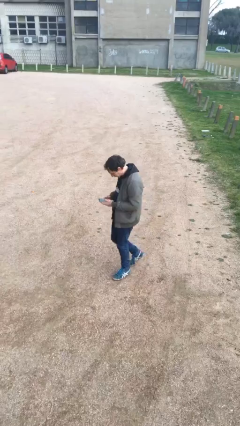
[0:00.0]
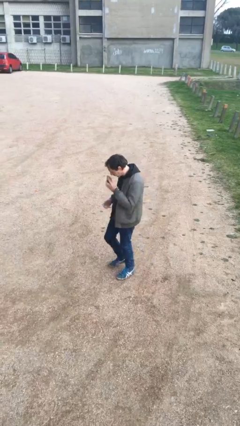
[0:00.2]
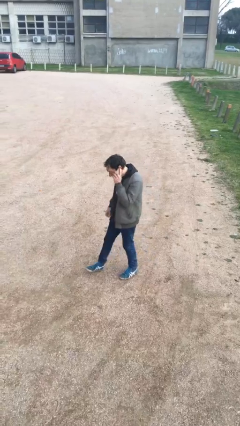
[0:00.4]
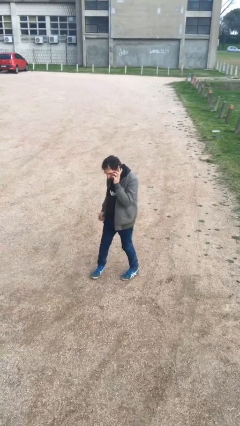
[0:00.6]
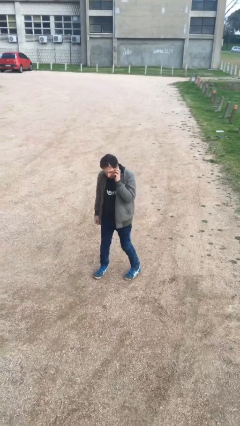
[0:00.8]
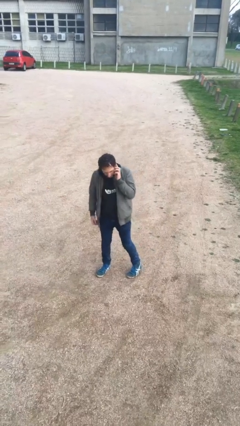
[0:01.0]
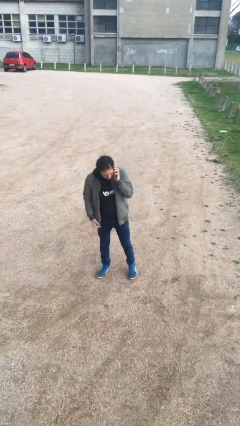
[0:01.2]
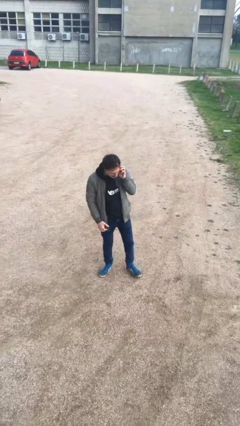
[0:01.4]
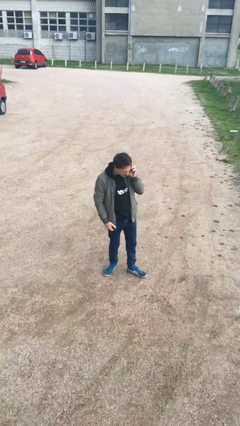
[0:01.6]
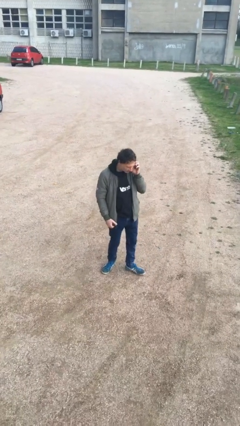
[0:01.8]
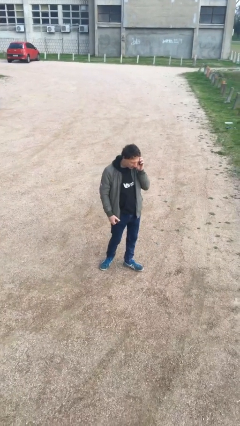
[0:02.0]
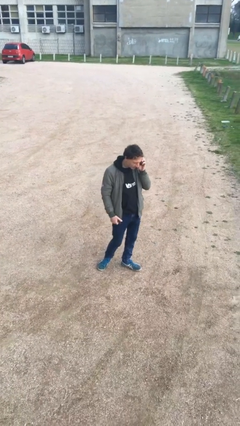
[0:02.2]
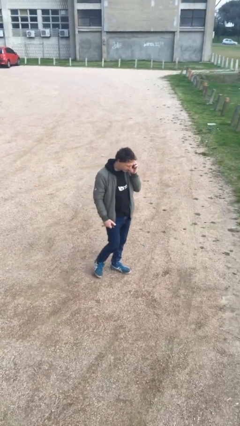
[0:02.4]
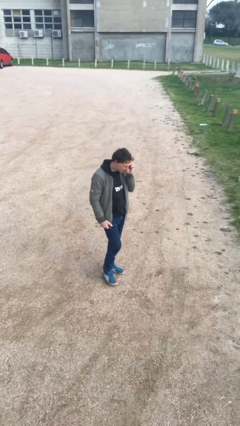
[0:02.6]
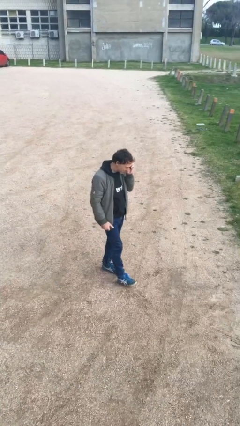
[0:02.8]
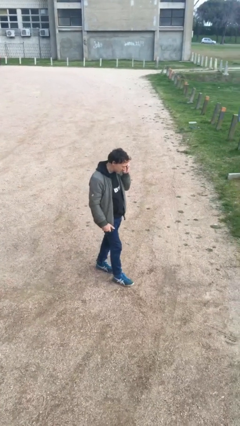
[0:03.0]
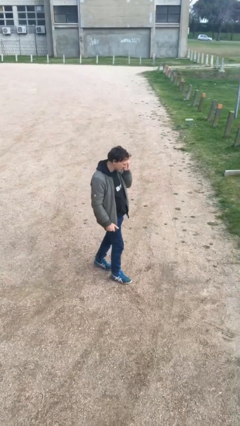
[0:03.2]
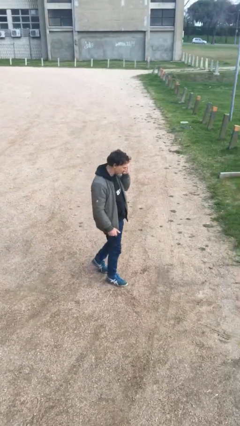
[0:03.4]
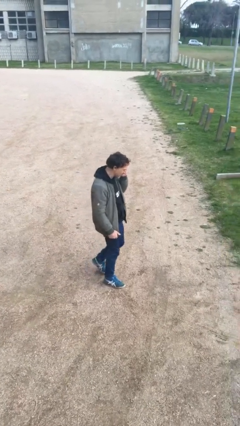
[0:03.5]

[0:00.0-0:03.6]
person talks on phone

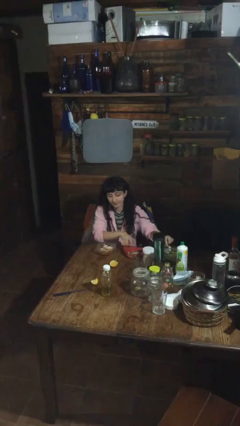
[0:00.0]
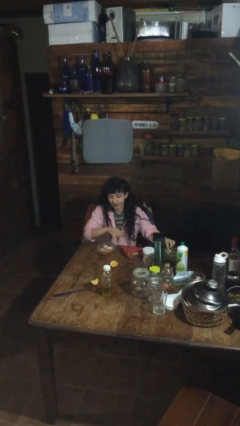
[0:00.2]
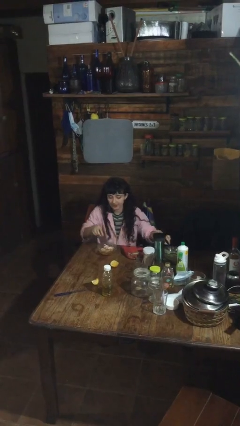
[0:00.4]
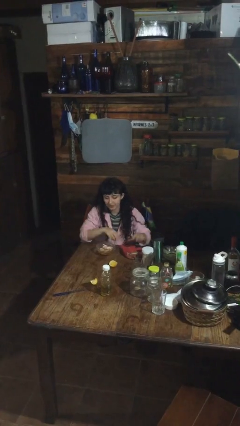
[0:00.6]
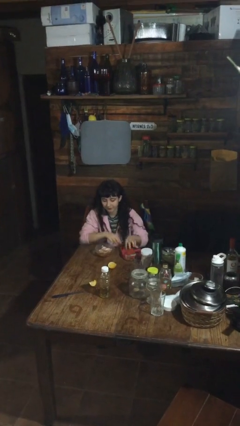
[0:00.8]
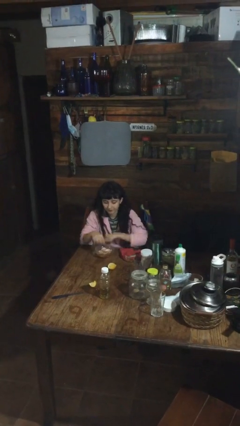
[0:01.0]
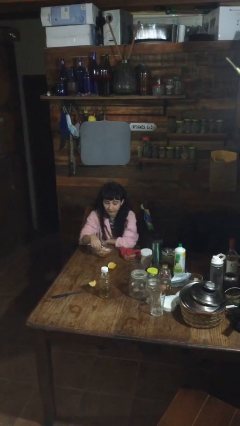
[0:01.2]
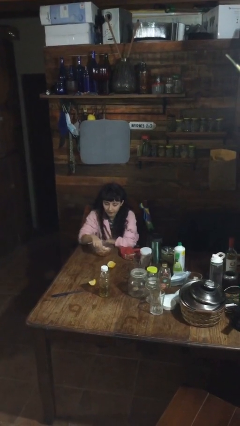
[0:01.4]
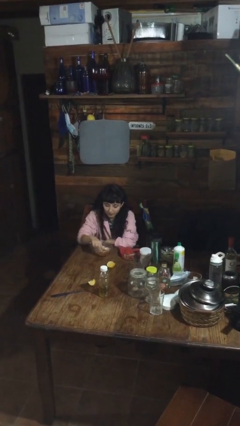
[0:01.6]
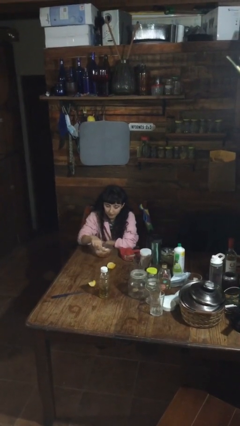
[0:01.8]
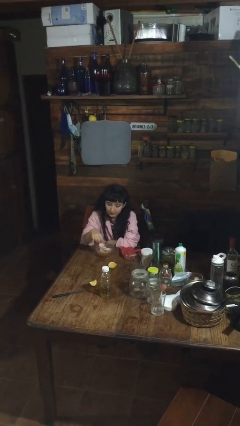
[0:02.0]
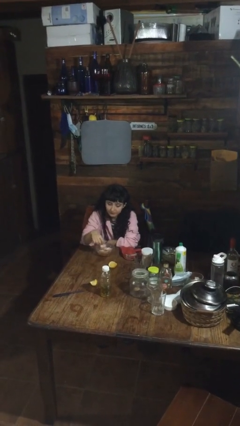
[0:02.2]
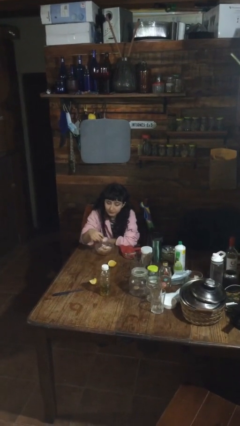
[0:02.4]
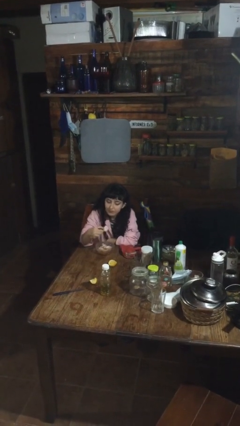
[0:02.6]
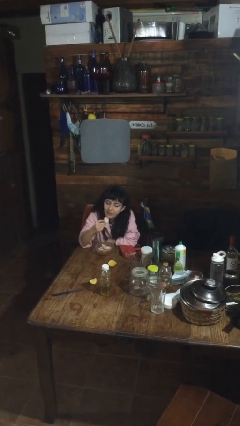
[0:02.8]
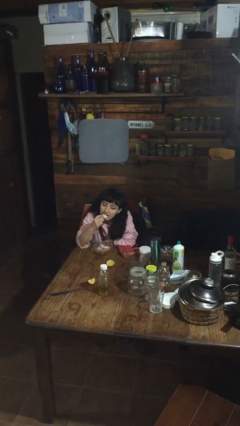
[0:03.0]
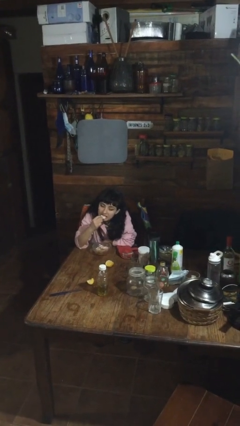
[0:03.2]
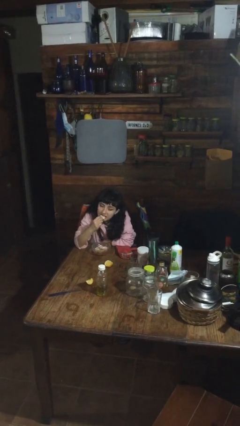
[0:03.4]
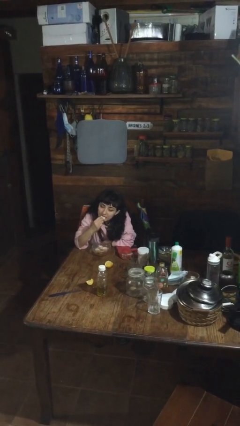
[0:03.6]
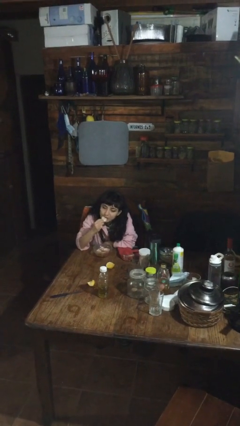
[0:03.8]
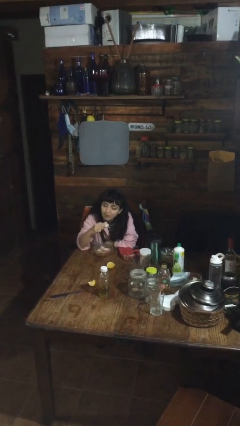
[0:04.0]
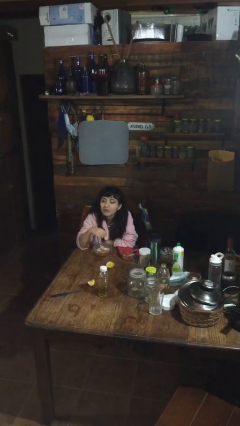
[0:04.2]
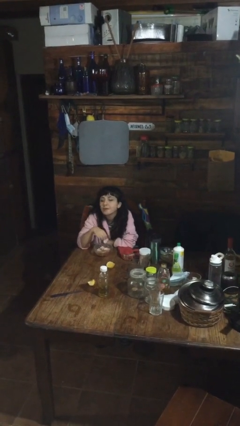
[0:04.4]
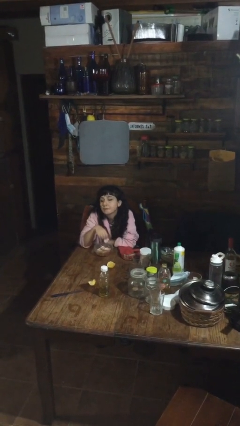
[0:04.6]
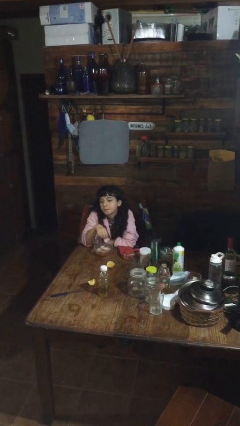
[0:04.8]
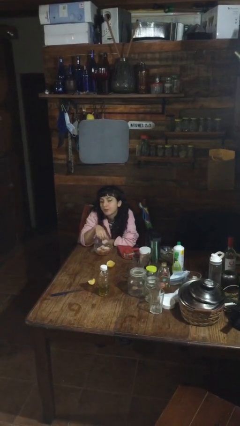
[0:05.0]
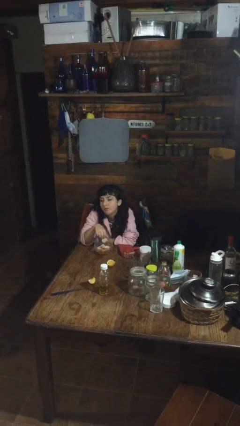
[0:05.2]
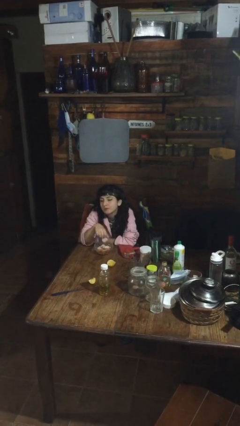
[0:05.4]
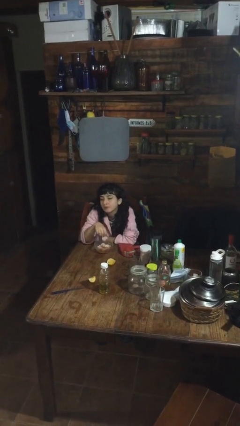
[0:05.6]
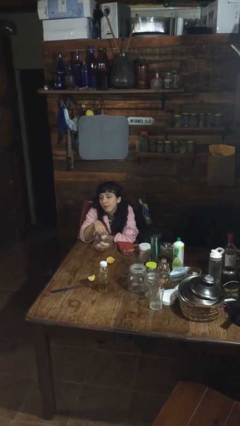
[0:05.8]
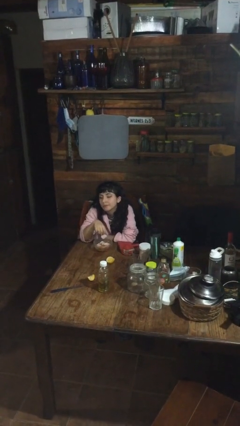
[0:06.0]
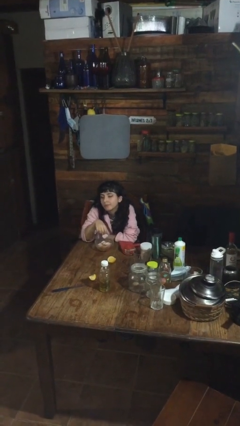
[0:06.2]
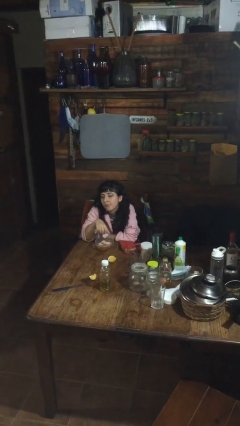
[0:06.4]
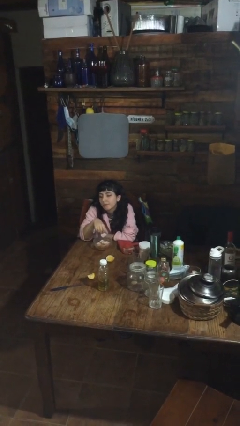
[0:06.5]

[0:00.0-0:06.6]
person eats with hands

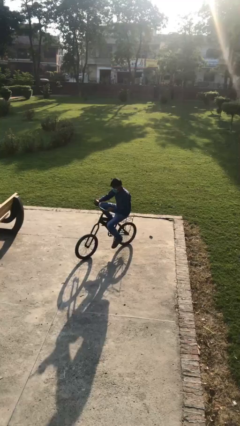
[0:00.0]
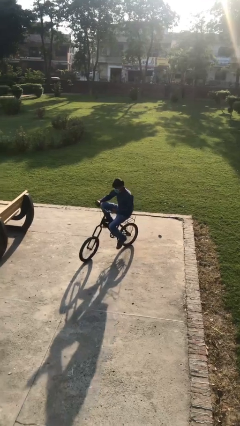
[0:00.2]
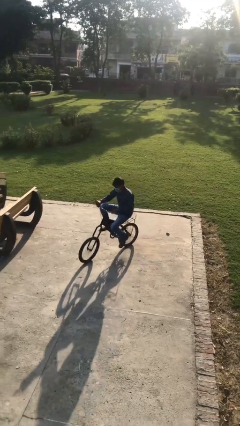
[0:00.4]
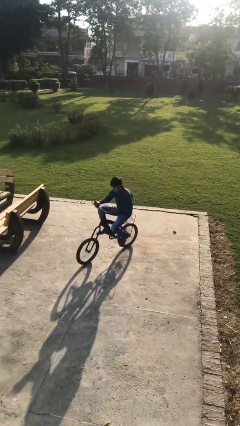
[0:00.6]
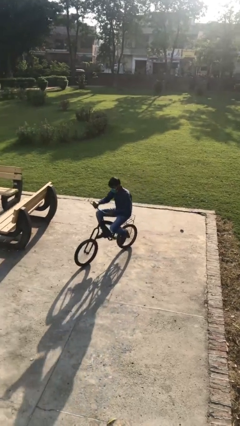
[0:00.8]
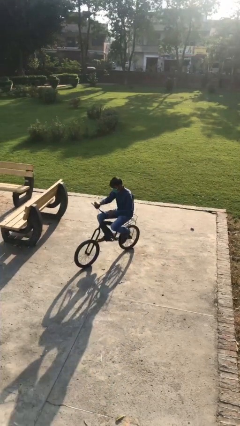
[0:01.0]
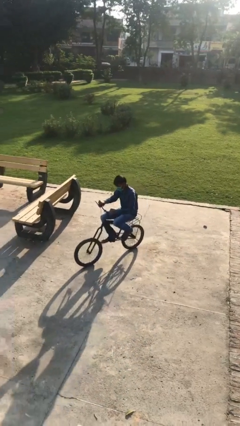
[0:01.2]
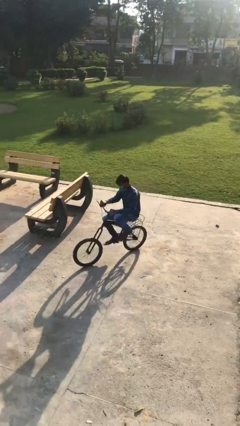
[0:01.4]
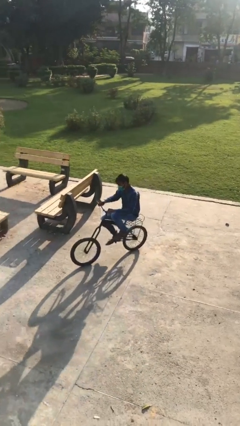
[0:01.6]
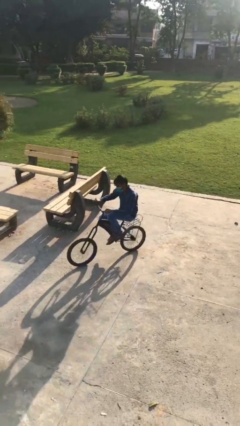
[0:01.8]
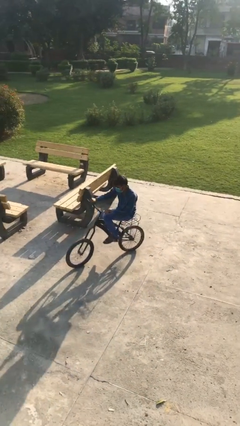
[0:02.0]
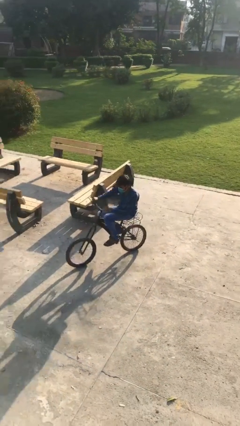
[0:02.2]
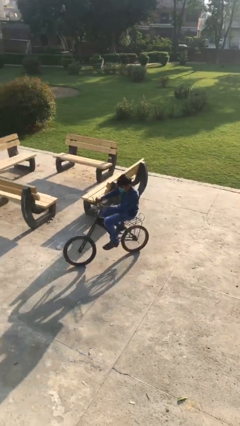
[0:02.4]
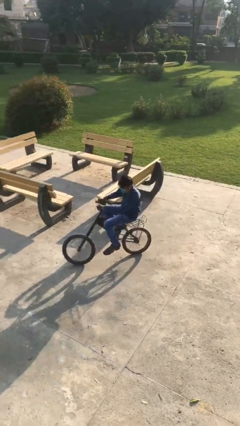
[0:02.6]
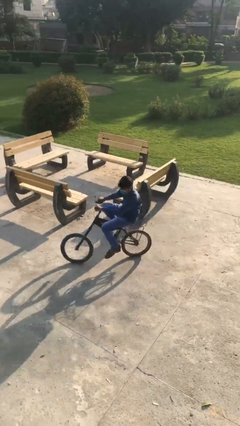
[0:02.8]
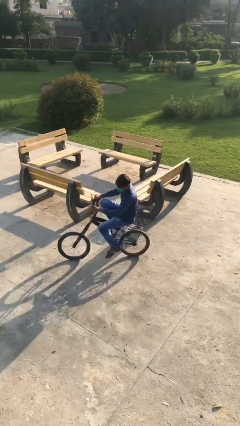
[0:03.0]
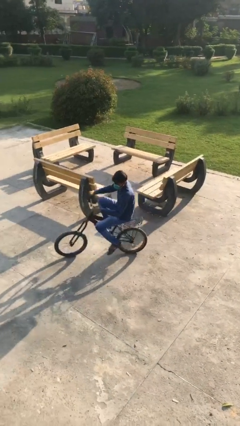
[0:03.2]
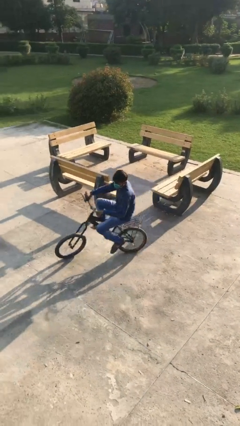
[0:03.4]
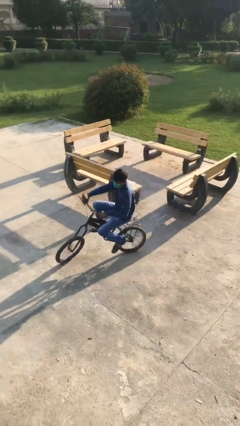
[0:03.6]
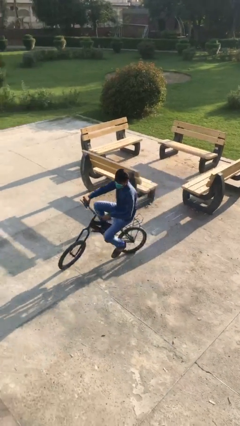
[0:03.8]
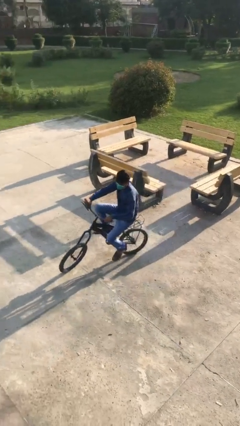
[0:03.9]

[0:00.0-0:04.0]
person rides bicycle

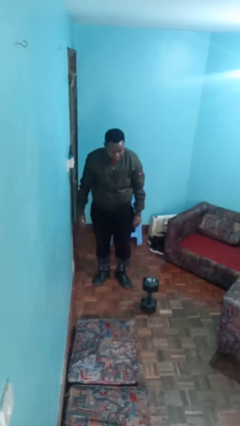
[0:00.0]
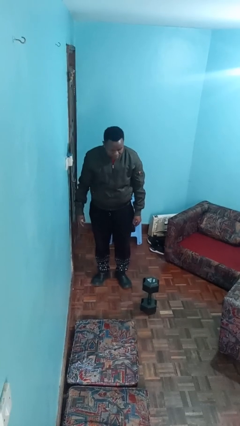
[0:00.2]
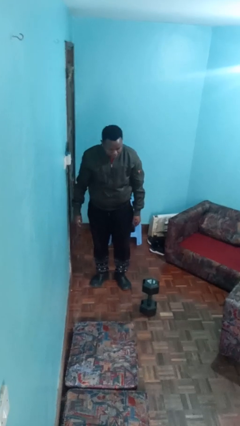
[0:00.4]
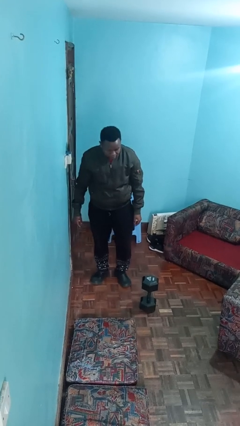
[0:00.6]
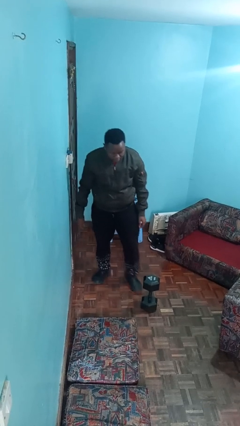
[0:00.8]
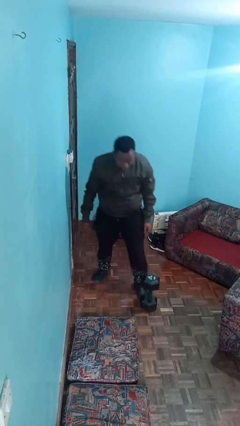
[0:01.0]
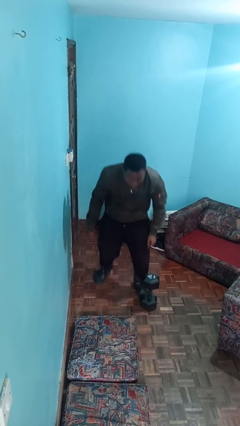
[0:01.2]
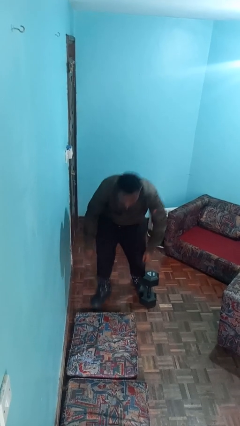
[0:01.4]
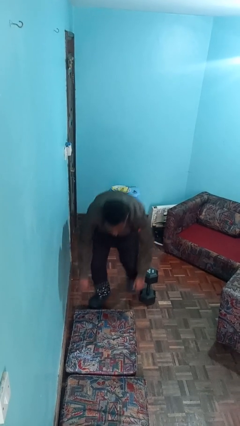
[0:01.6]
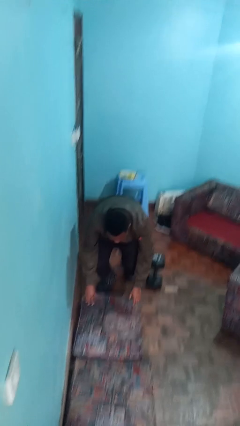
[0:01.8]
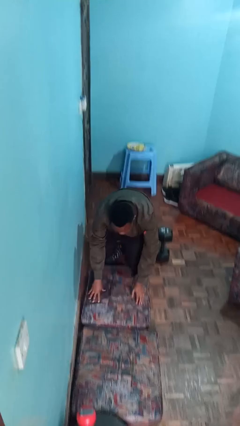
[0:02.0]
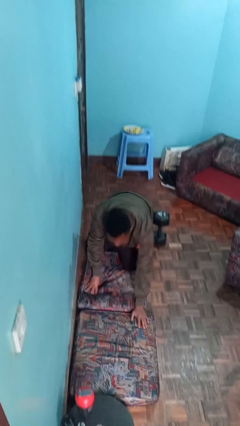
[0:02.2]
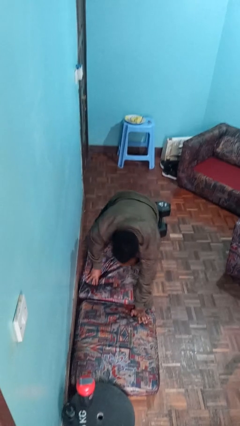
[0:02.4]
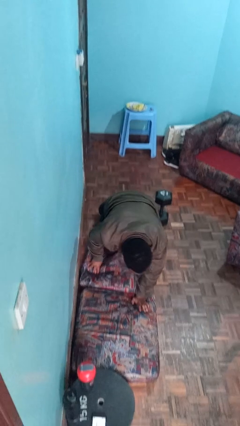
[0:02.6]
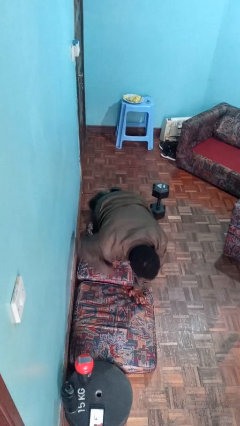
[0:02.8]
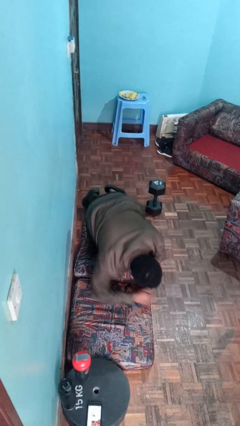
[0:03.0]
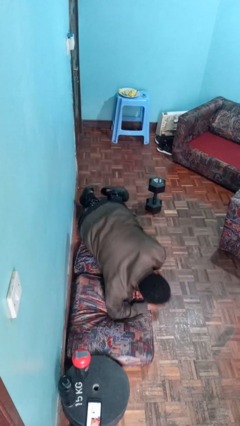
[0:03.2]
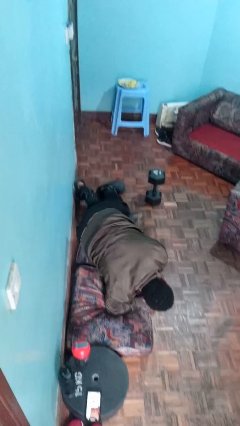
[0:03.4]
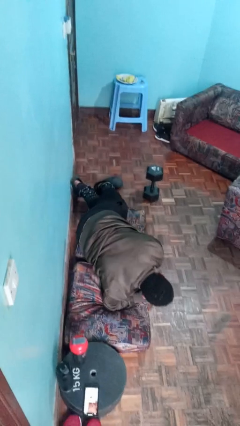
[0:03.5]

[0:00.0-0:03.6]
person trips on object on floor
